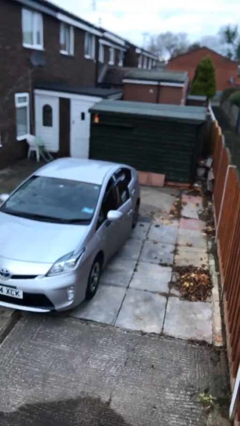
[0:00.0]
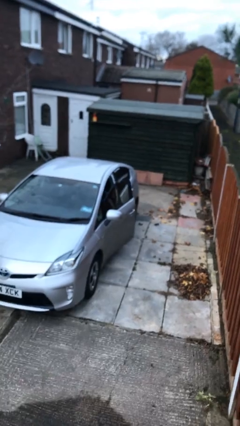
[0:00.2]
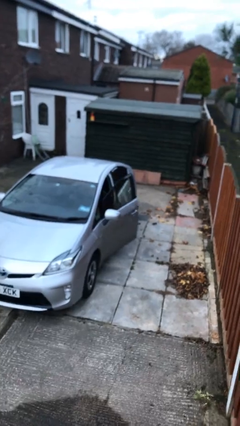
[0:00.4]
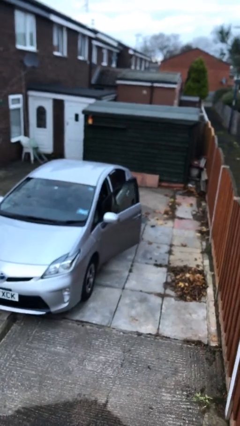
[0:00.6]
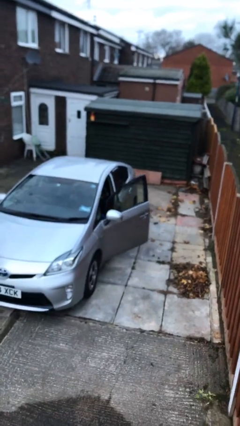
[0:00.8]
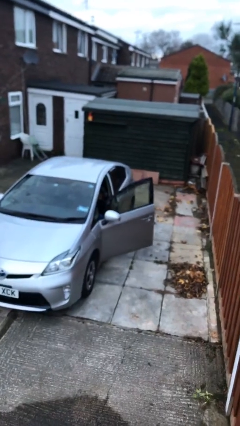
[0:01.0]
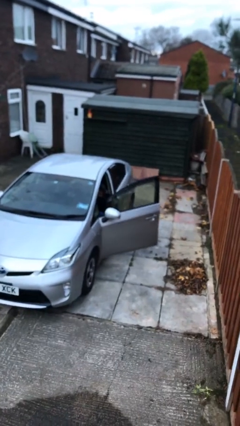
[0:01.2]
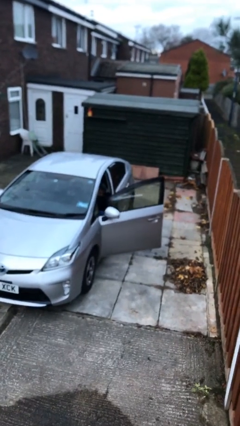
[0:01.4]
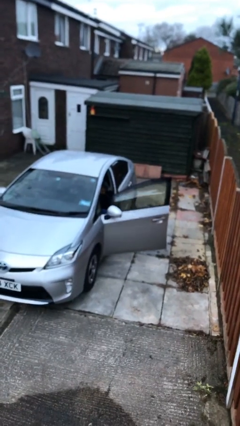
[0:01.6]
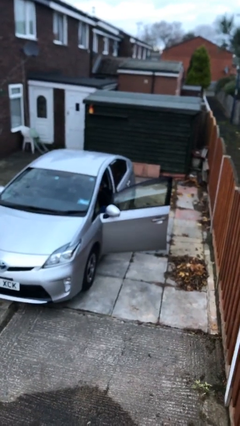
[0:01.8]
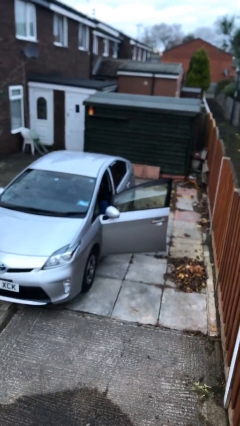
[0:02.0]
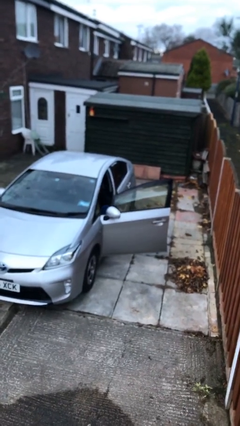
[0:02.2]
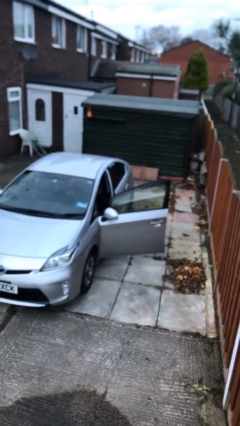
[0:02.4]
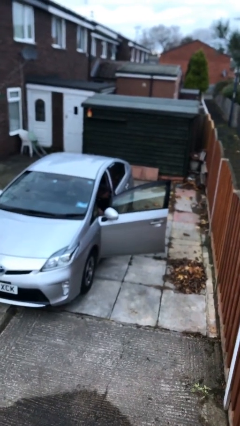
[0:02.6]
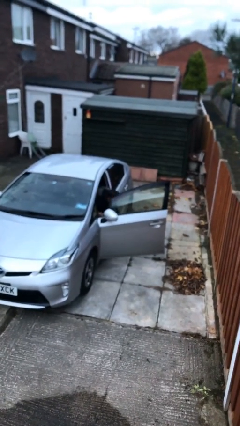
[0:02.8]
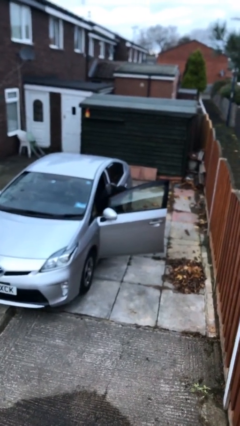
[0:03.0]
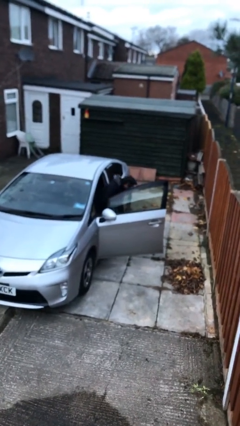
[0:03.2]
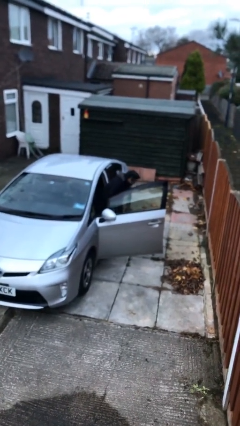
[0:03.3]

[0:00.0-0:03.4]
person opens car door

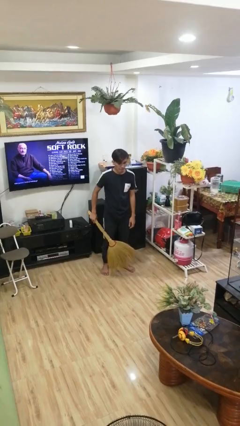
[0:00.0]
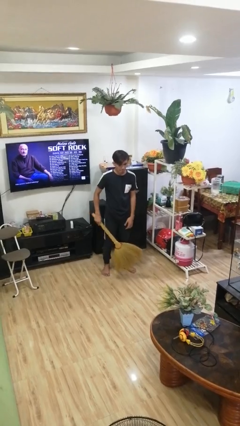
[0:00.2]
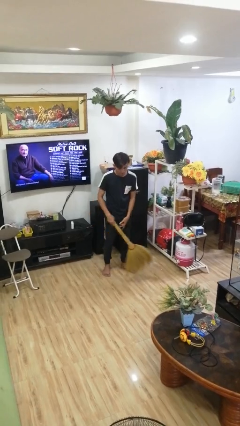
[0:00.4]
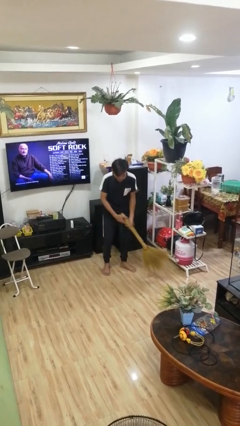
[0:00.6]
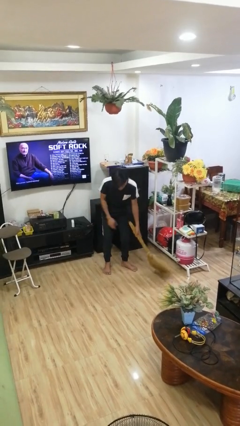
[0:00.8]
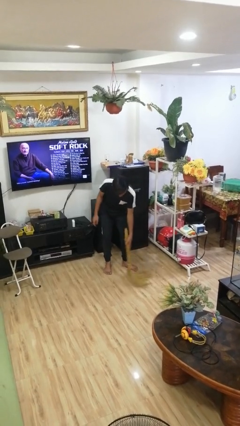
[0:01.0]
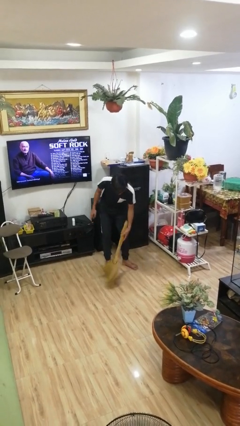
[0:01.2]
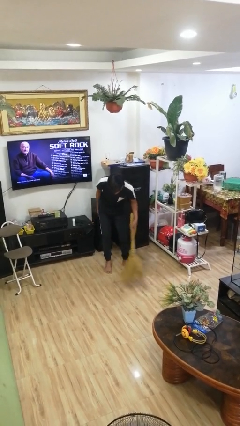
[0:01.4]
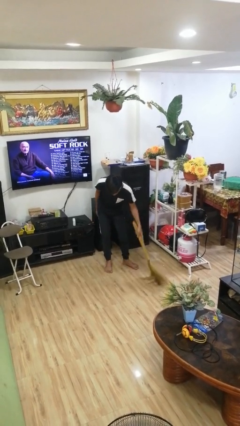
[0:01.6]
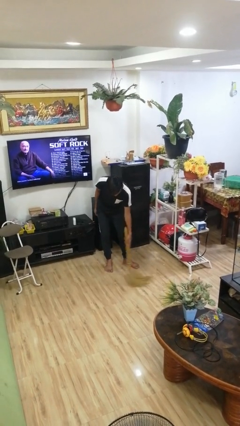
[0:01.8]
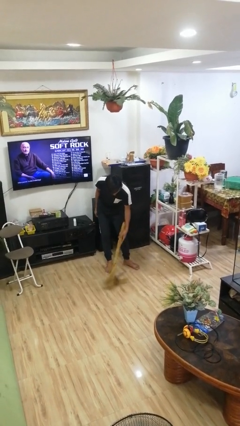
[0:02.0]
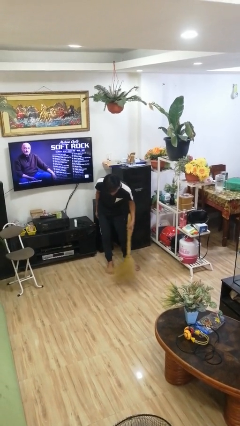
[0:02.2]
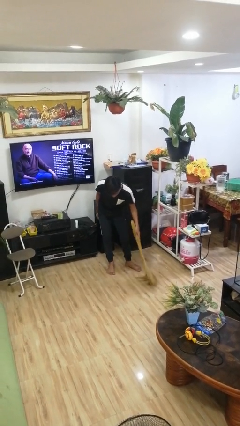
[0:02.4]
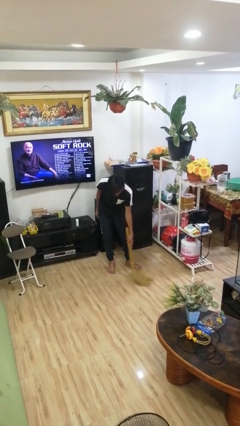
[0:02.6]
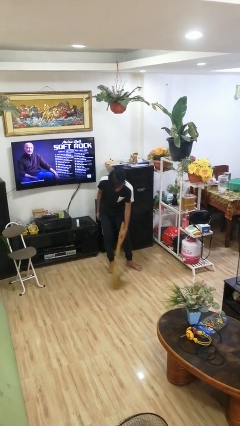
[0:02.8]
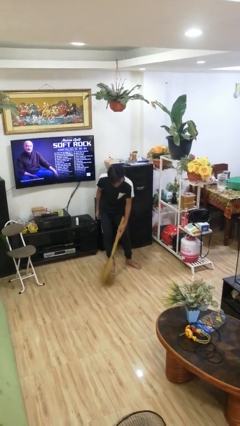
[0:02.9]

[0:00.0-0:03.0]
person sweeps floor

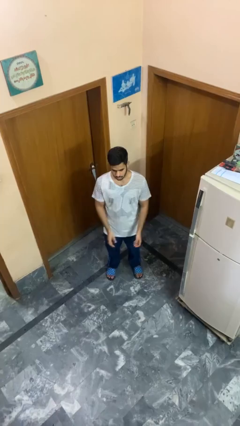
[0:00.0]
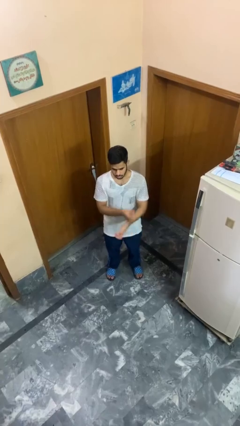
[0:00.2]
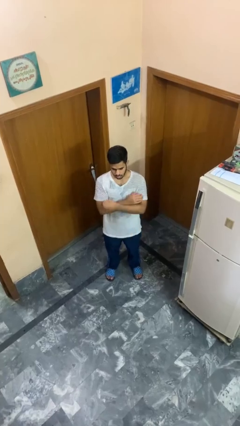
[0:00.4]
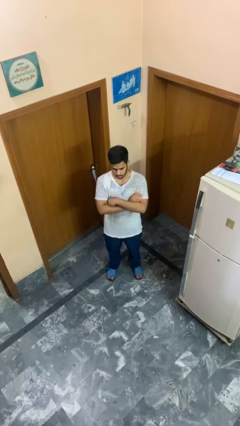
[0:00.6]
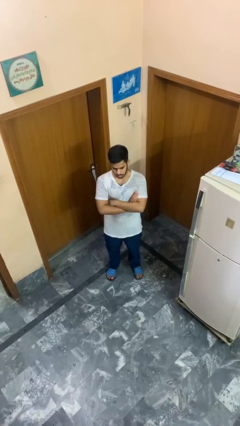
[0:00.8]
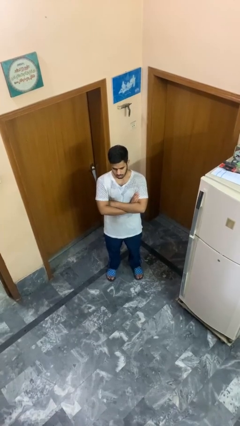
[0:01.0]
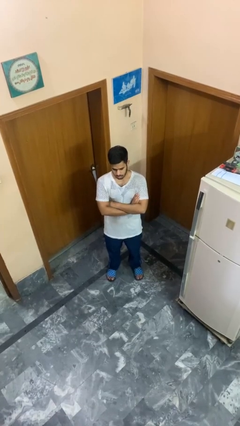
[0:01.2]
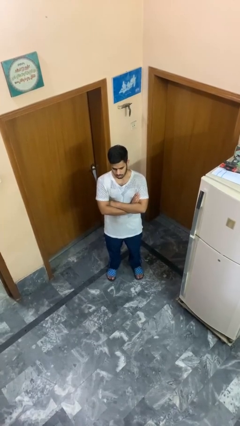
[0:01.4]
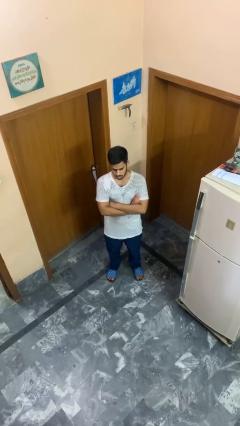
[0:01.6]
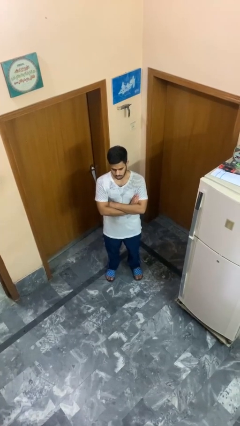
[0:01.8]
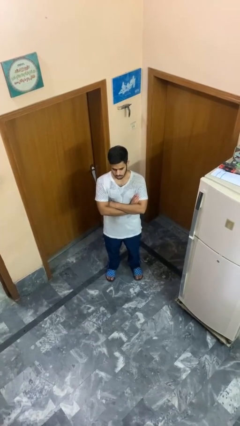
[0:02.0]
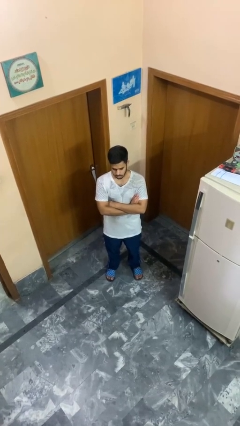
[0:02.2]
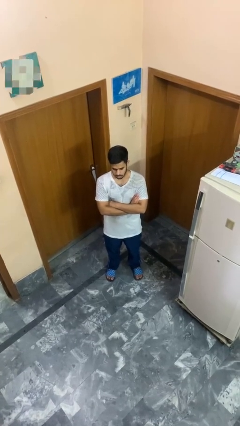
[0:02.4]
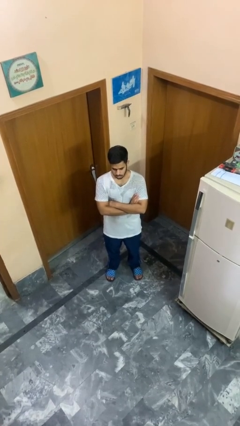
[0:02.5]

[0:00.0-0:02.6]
person crosses arms

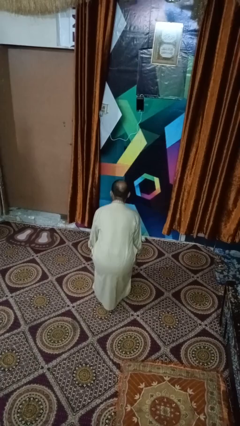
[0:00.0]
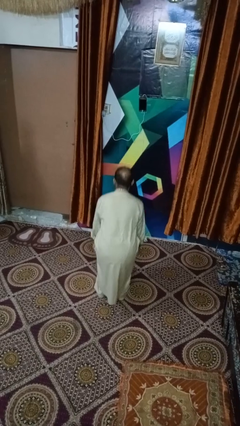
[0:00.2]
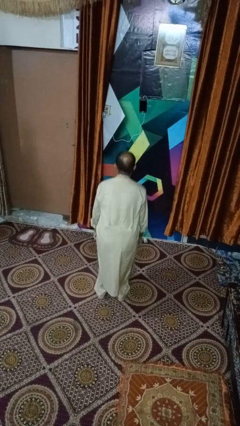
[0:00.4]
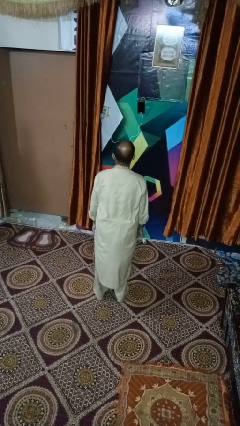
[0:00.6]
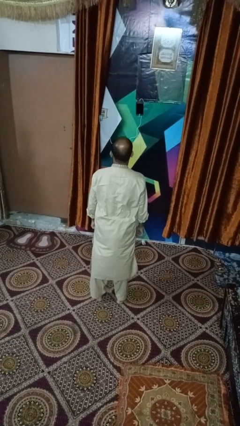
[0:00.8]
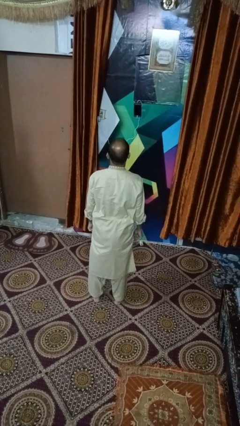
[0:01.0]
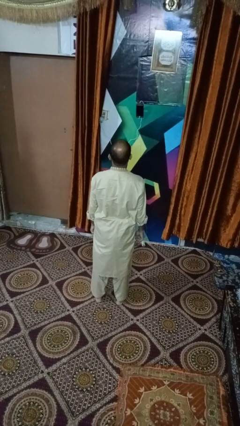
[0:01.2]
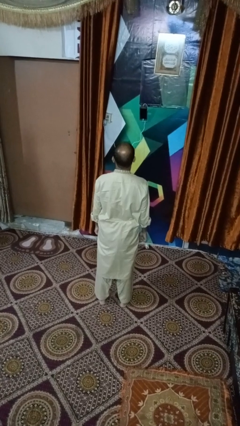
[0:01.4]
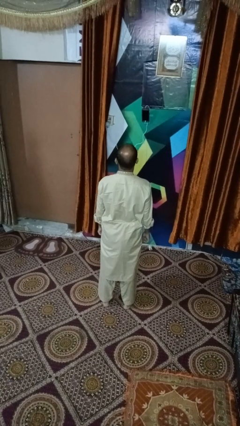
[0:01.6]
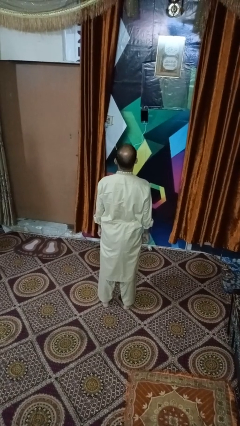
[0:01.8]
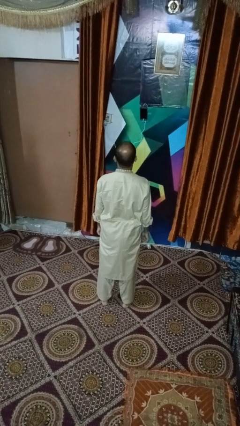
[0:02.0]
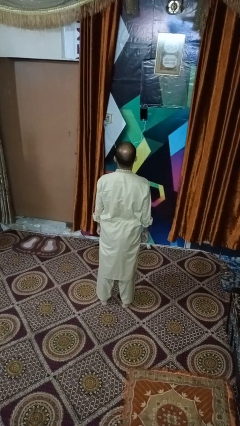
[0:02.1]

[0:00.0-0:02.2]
person stands up

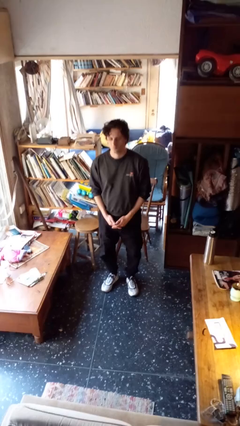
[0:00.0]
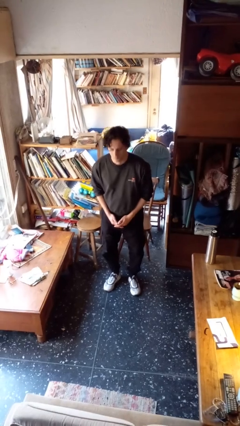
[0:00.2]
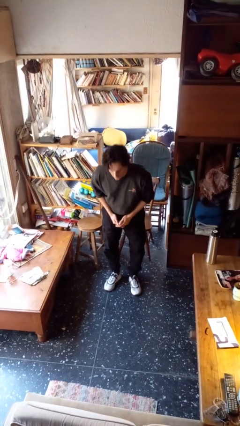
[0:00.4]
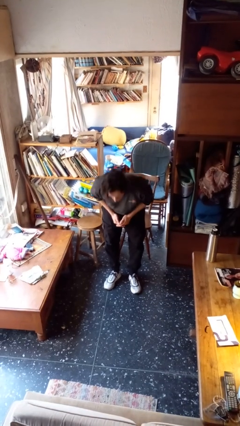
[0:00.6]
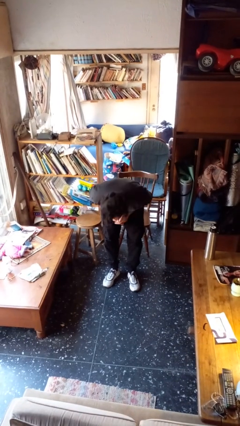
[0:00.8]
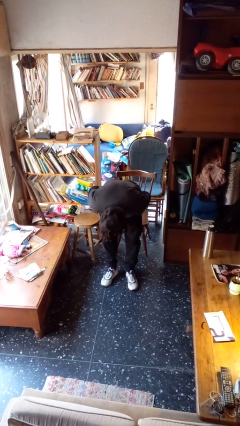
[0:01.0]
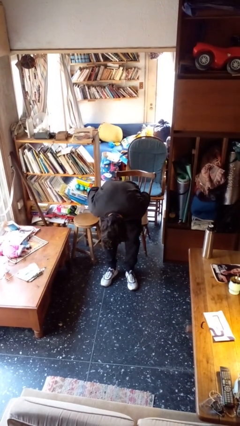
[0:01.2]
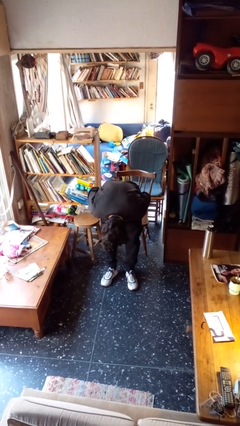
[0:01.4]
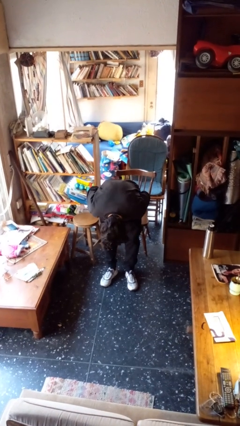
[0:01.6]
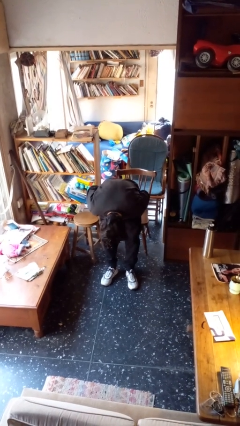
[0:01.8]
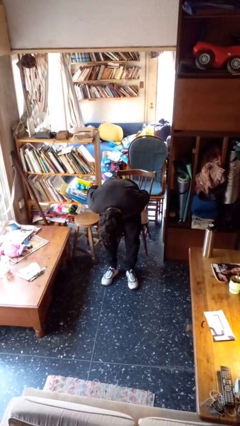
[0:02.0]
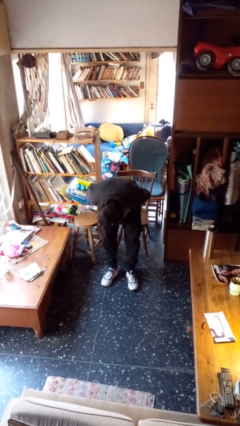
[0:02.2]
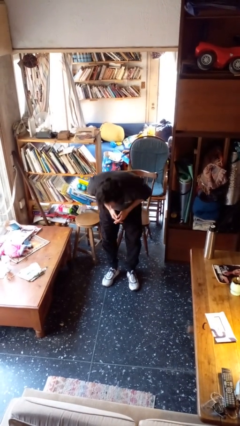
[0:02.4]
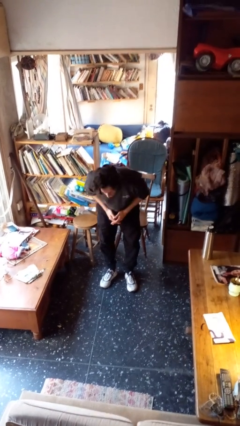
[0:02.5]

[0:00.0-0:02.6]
person bows

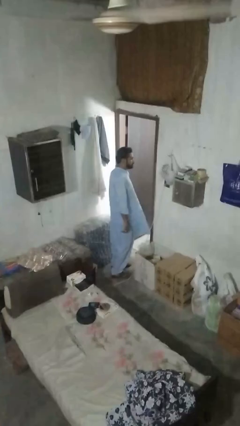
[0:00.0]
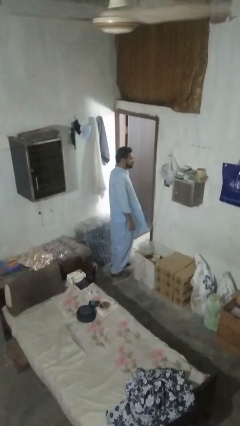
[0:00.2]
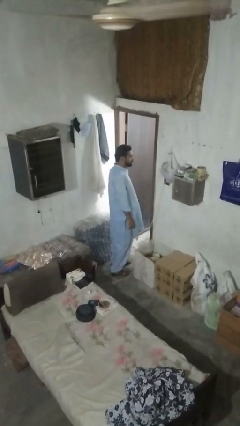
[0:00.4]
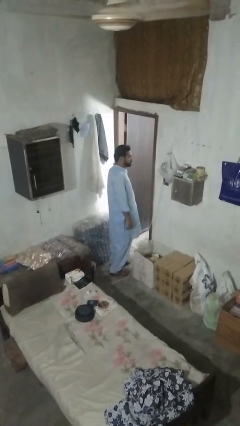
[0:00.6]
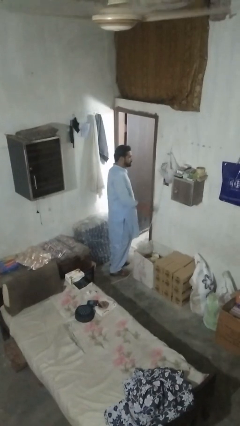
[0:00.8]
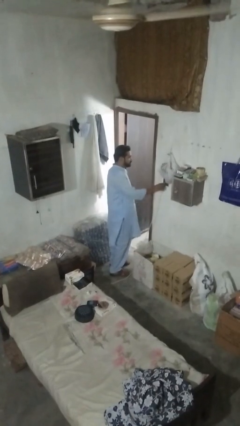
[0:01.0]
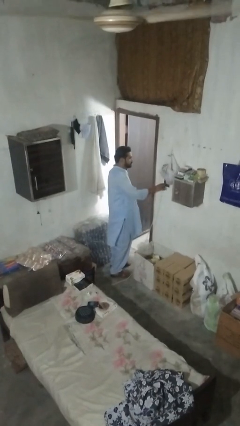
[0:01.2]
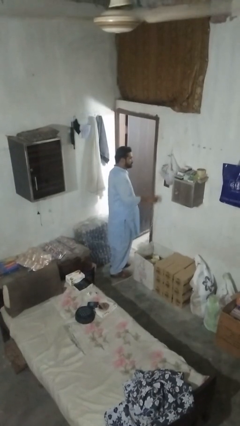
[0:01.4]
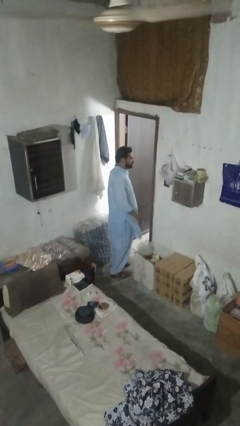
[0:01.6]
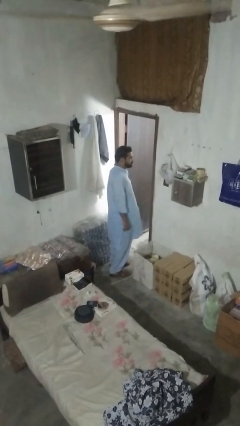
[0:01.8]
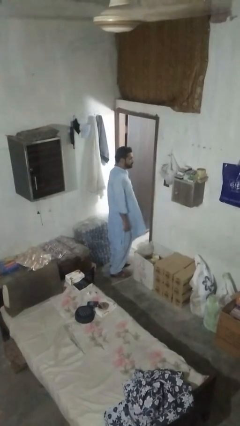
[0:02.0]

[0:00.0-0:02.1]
person unplugs from electrical socket

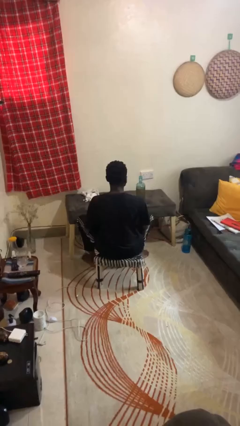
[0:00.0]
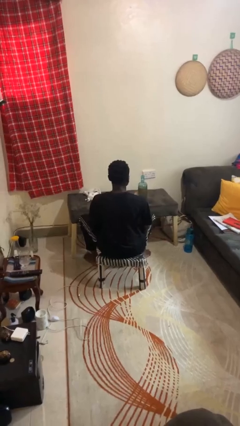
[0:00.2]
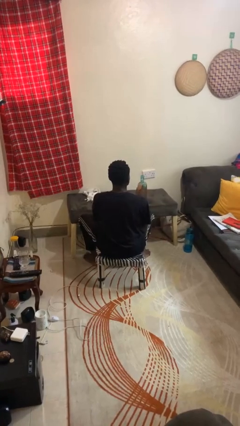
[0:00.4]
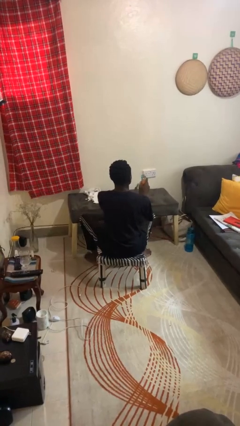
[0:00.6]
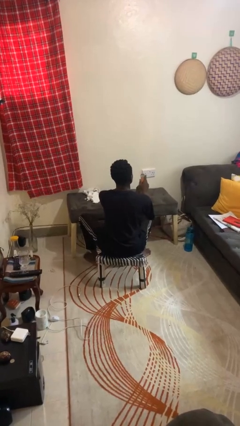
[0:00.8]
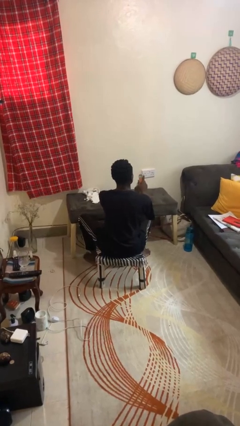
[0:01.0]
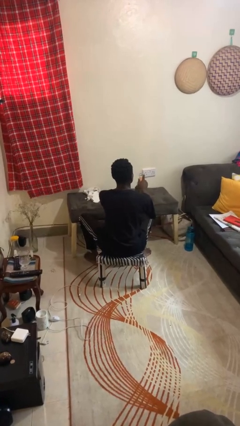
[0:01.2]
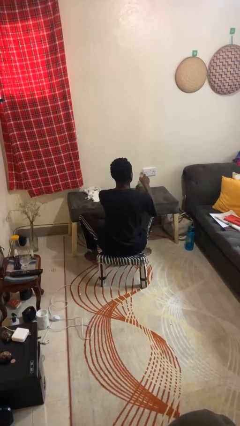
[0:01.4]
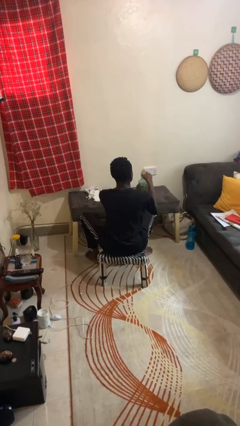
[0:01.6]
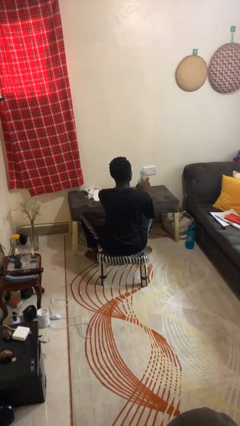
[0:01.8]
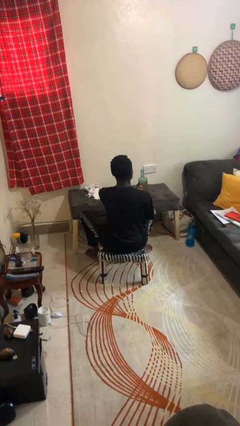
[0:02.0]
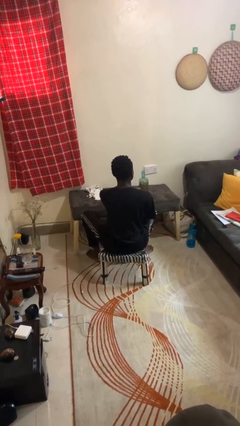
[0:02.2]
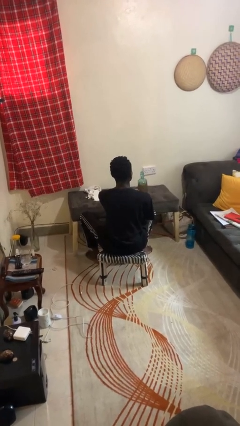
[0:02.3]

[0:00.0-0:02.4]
person opens can with can opener
